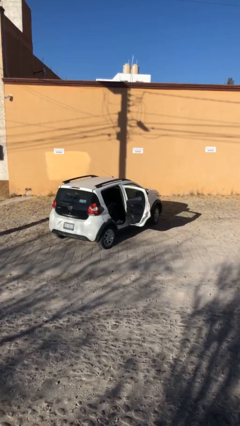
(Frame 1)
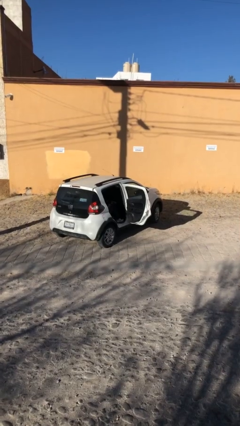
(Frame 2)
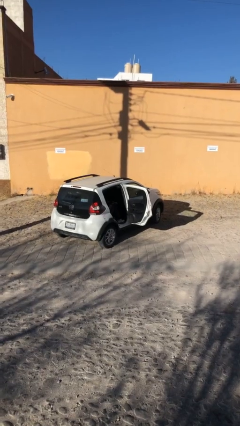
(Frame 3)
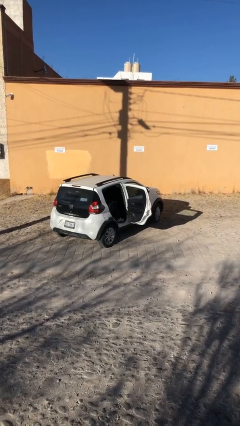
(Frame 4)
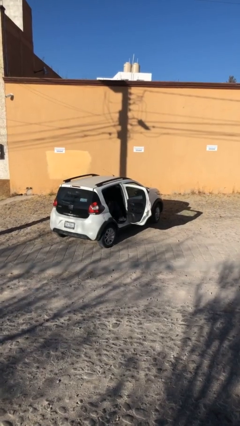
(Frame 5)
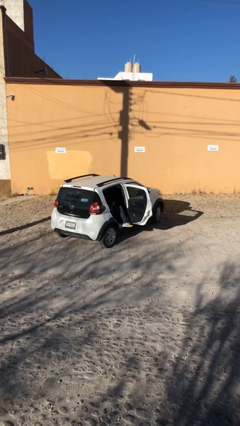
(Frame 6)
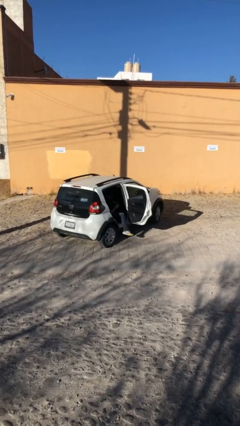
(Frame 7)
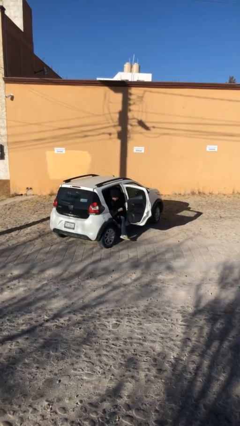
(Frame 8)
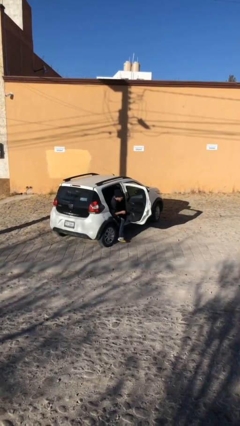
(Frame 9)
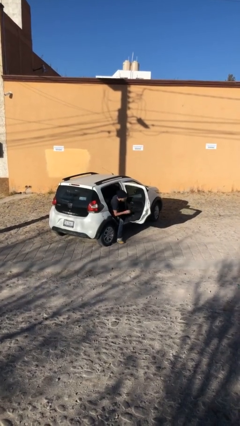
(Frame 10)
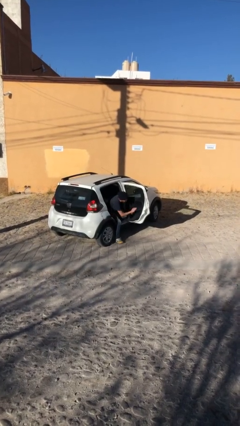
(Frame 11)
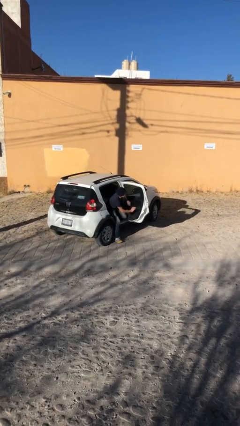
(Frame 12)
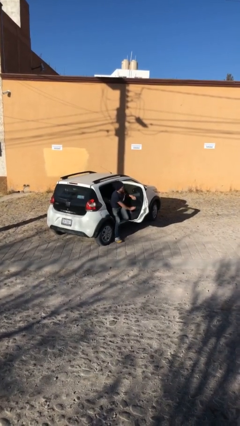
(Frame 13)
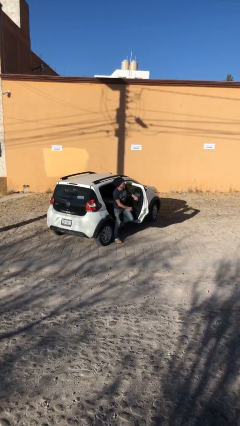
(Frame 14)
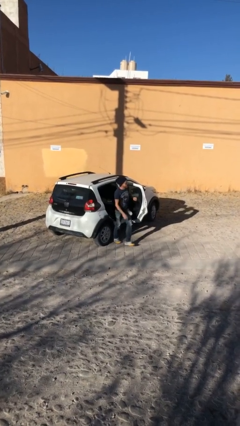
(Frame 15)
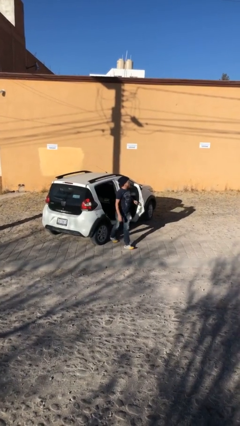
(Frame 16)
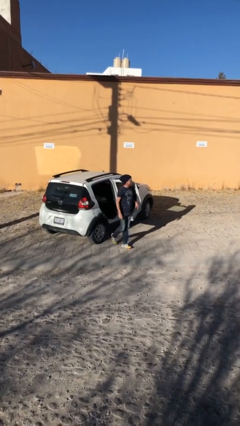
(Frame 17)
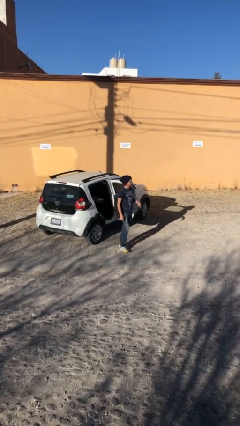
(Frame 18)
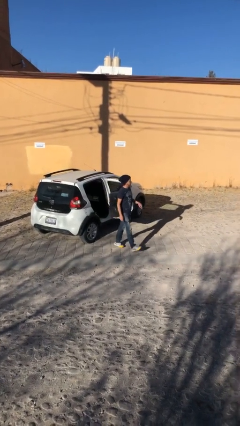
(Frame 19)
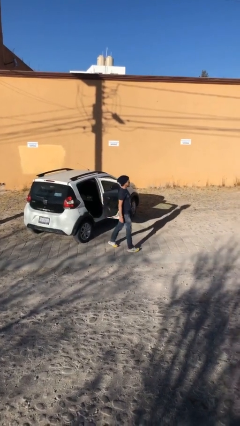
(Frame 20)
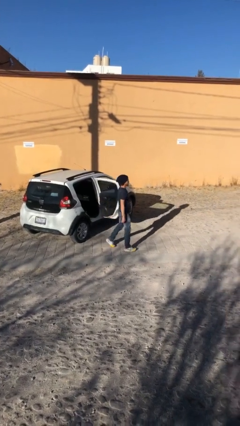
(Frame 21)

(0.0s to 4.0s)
person exits car

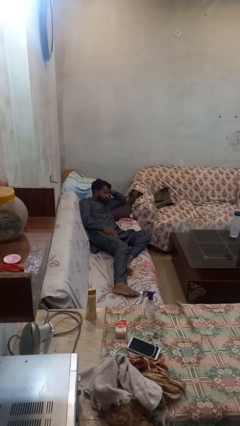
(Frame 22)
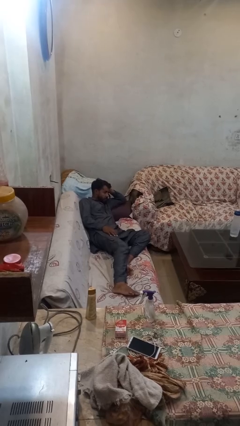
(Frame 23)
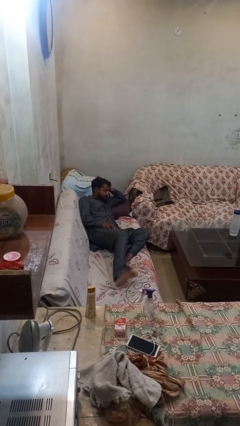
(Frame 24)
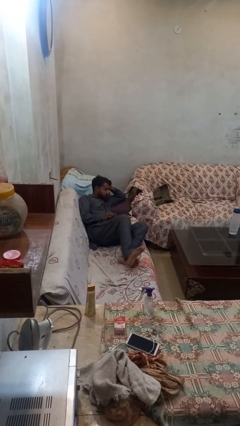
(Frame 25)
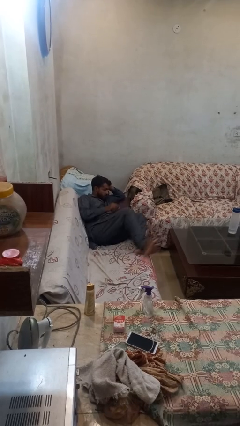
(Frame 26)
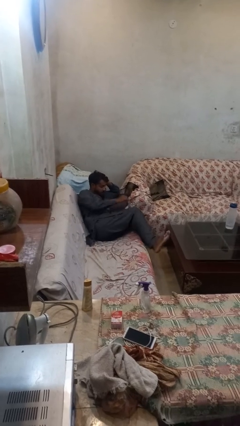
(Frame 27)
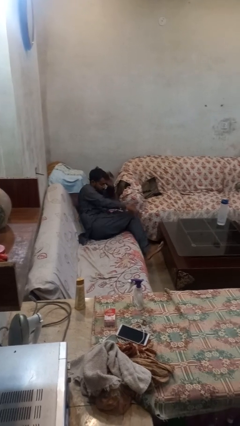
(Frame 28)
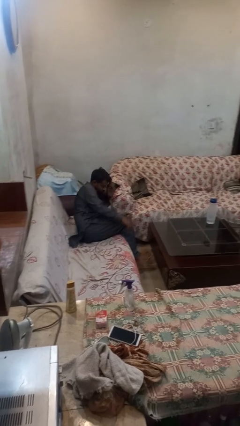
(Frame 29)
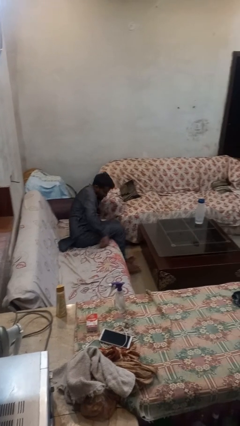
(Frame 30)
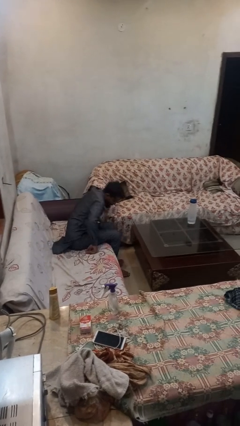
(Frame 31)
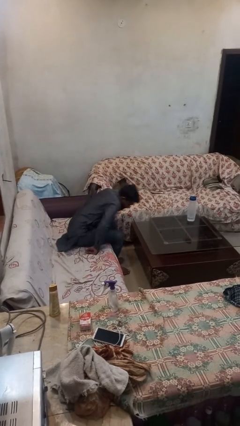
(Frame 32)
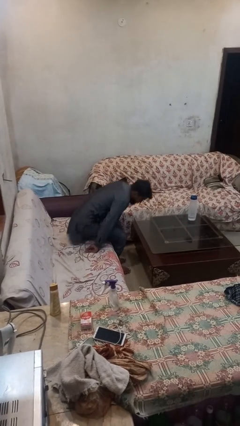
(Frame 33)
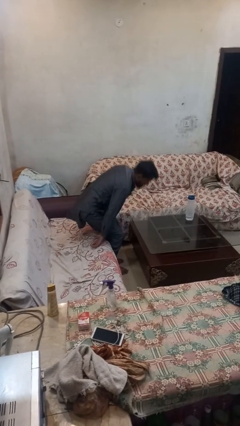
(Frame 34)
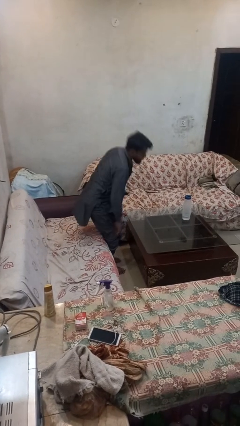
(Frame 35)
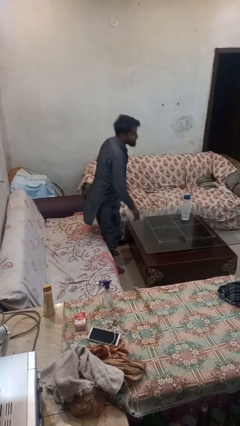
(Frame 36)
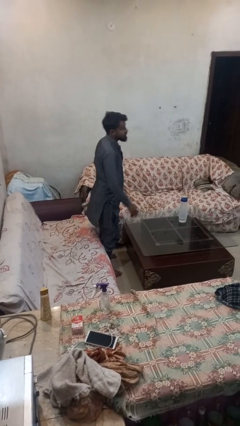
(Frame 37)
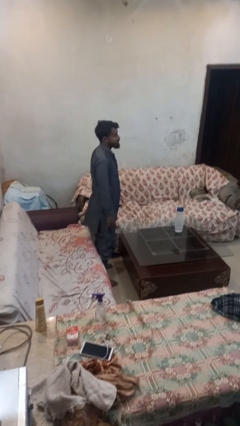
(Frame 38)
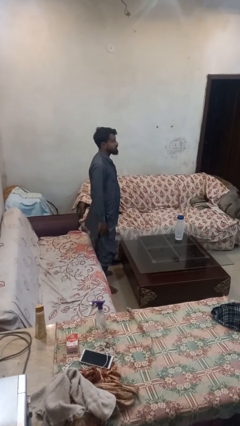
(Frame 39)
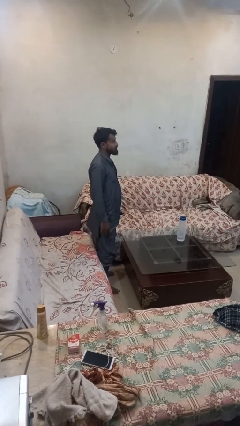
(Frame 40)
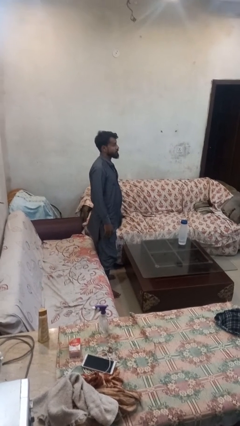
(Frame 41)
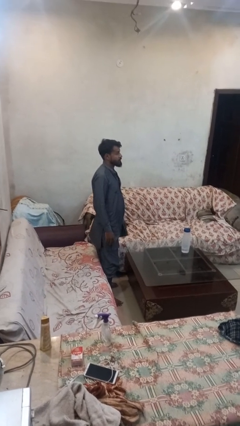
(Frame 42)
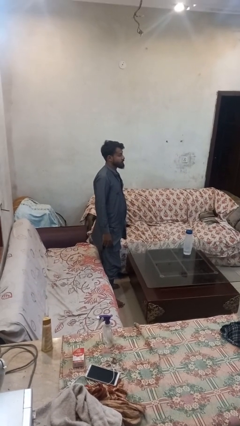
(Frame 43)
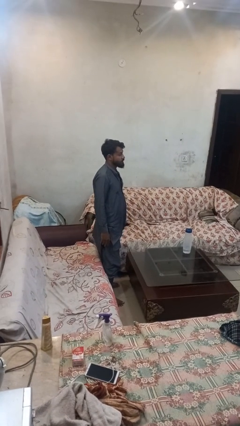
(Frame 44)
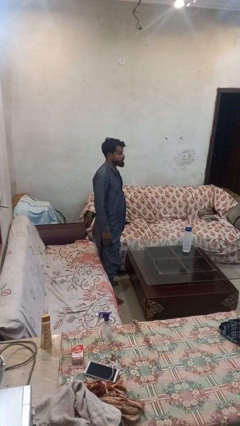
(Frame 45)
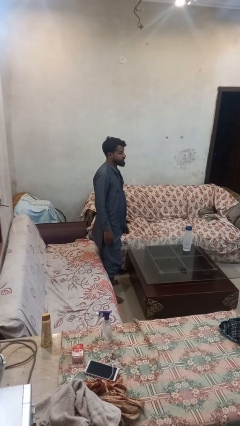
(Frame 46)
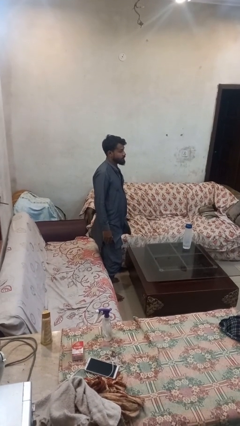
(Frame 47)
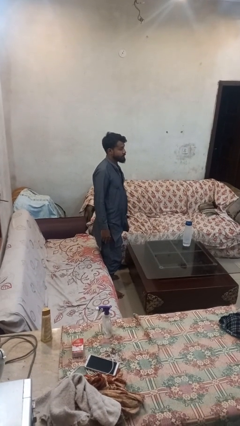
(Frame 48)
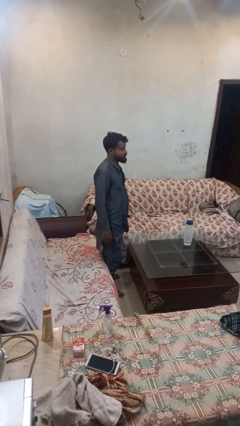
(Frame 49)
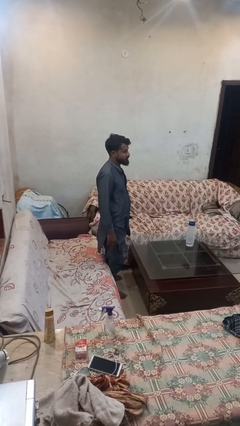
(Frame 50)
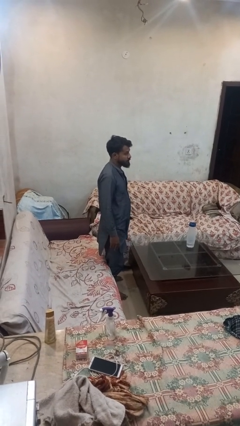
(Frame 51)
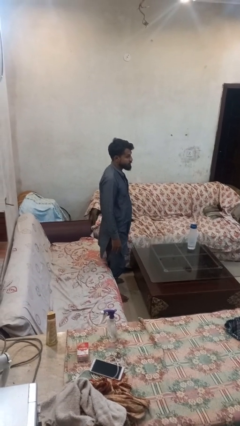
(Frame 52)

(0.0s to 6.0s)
person stands up

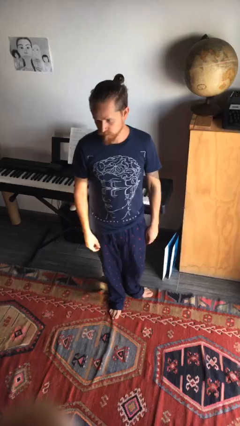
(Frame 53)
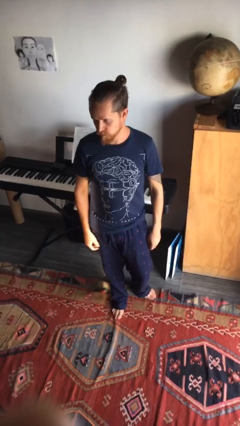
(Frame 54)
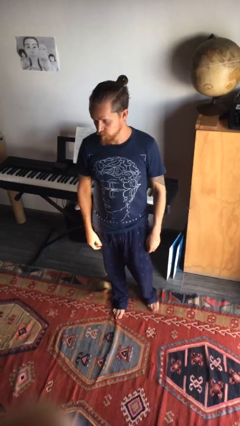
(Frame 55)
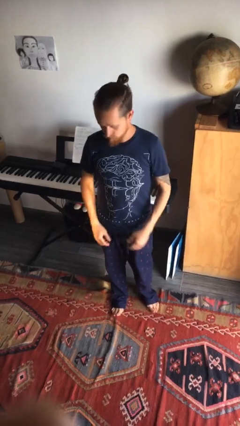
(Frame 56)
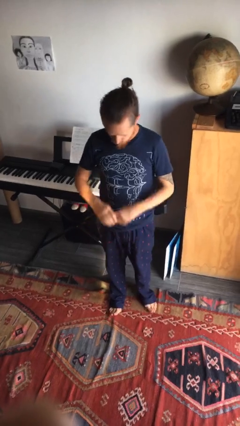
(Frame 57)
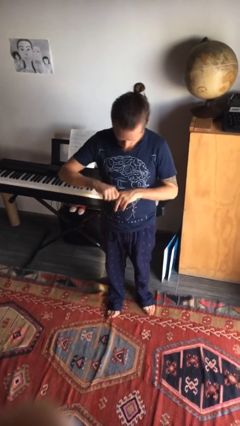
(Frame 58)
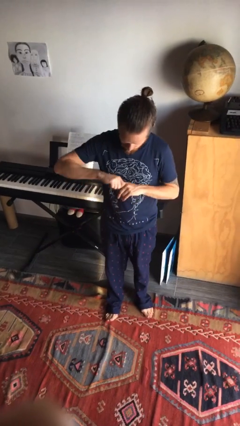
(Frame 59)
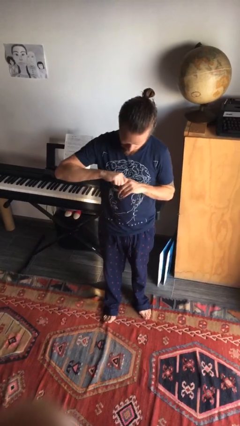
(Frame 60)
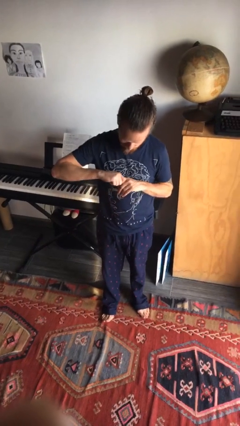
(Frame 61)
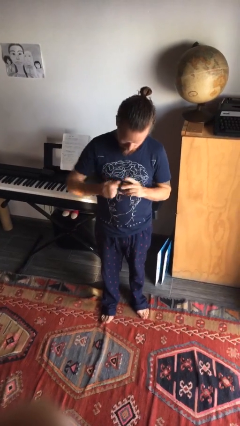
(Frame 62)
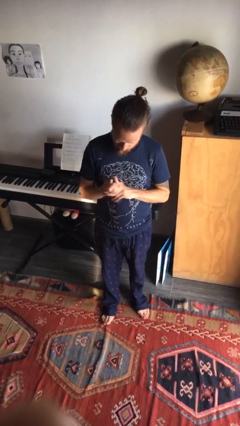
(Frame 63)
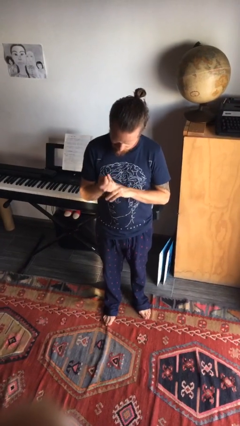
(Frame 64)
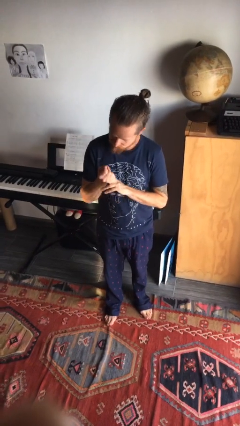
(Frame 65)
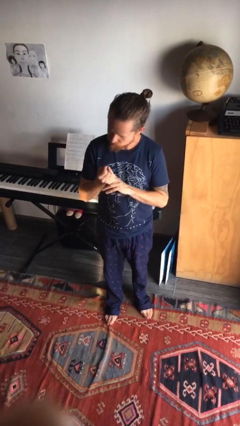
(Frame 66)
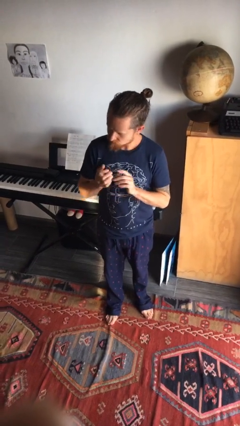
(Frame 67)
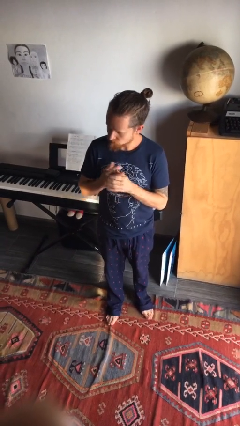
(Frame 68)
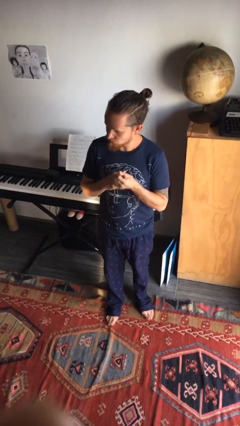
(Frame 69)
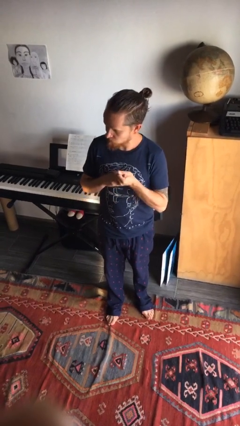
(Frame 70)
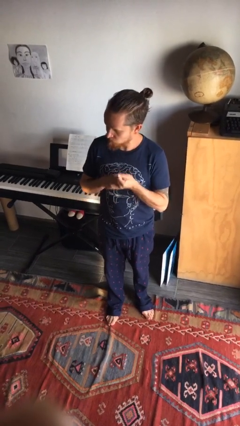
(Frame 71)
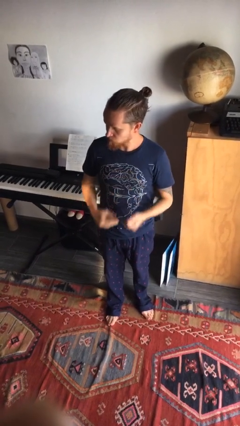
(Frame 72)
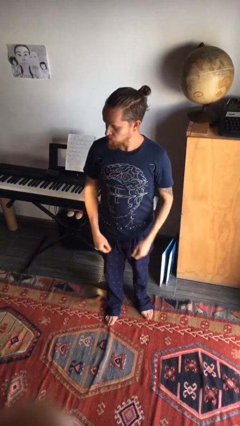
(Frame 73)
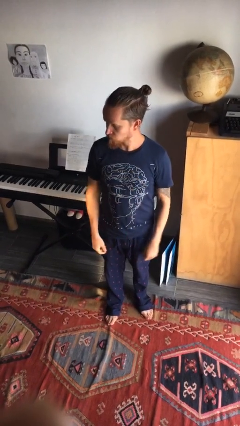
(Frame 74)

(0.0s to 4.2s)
person cracks knuckles

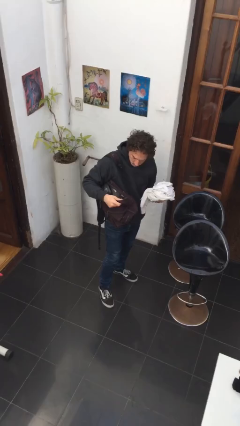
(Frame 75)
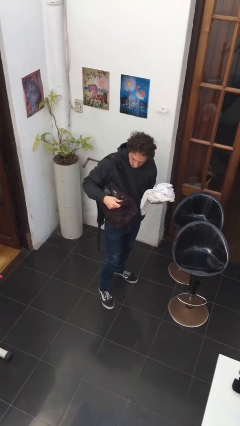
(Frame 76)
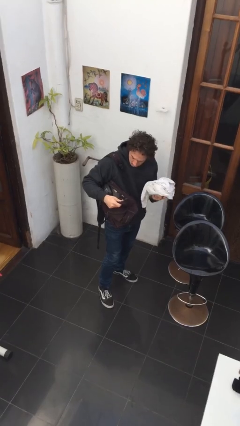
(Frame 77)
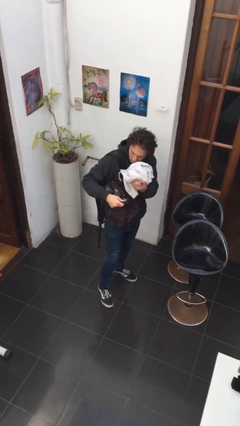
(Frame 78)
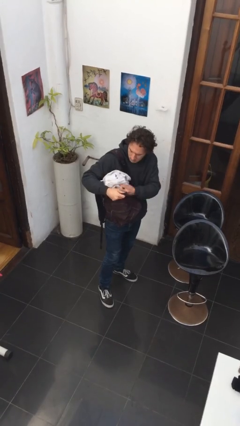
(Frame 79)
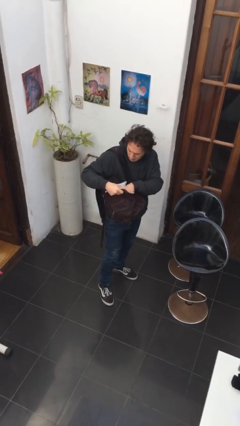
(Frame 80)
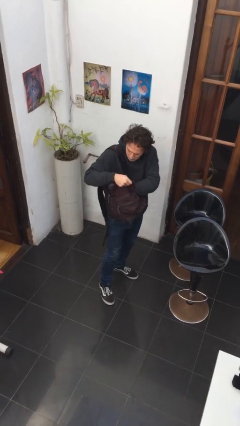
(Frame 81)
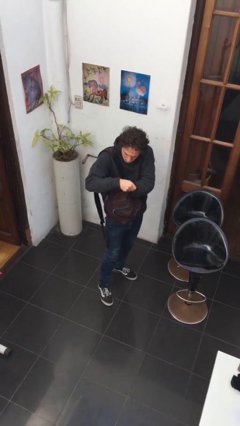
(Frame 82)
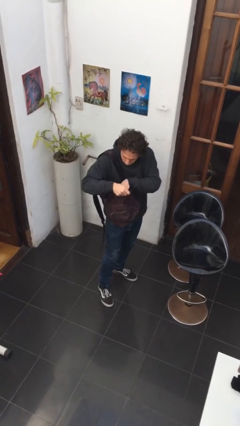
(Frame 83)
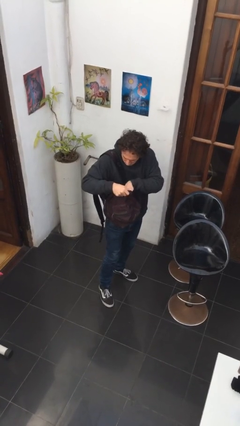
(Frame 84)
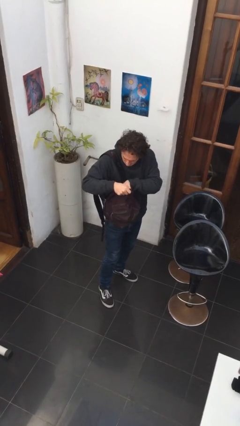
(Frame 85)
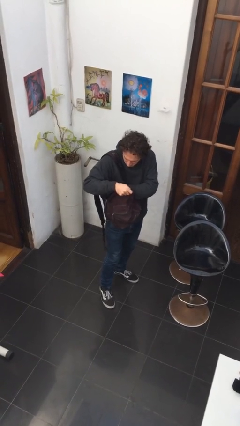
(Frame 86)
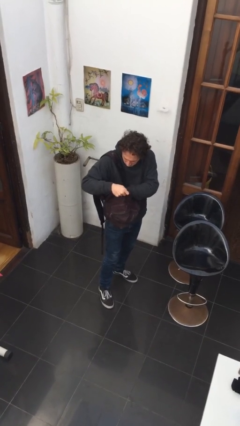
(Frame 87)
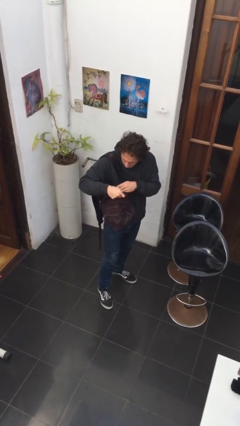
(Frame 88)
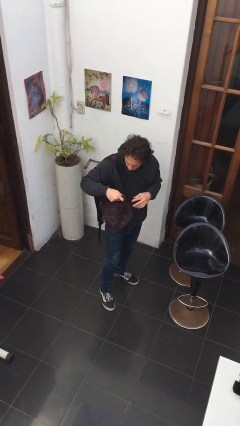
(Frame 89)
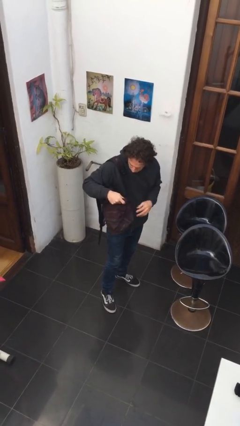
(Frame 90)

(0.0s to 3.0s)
person puts object into backpack

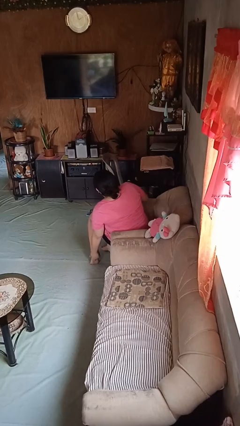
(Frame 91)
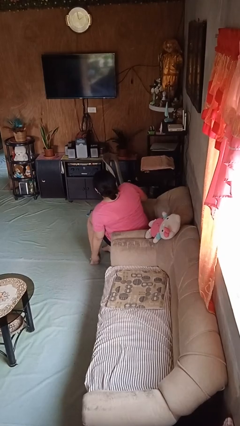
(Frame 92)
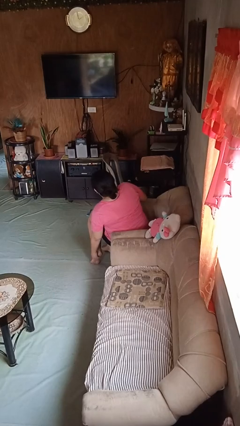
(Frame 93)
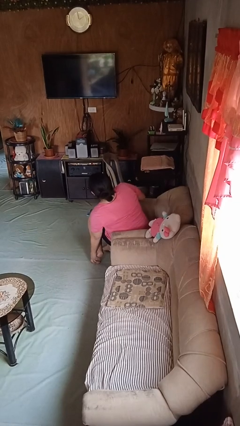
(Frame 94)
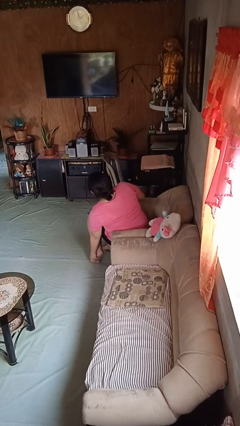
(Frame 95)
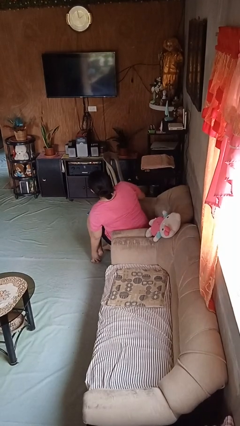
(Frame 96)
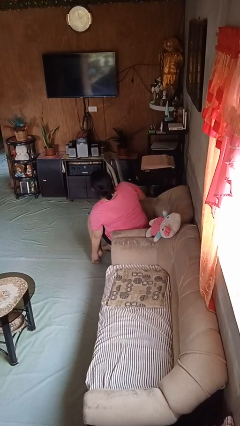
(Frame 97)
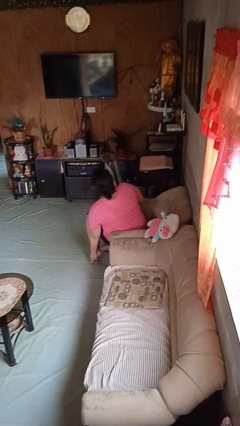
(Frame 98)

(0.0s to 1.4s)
person rubs foot
